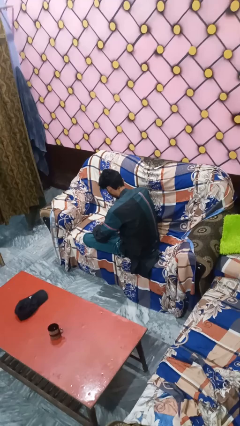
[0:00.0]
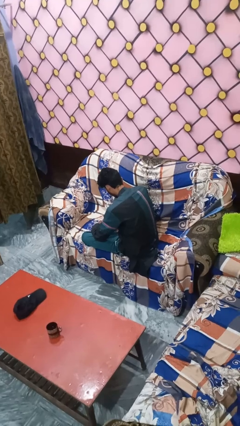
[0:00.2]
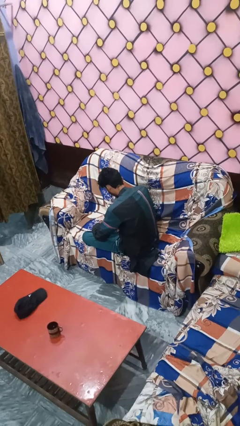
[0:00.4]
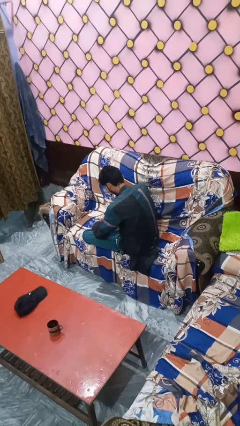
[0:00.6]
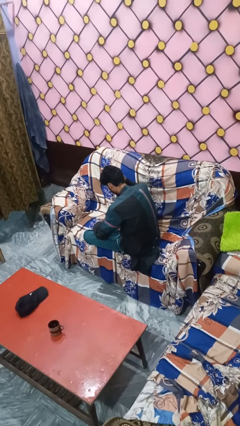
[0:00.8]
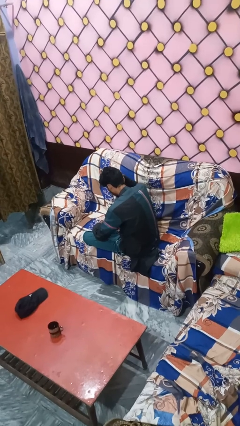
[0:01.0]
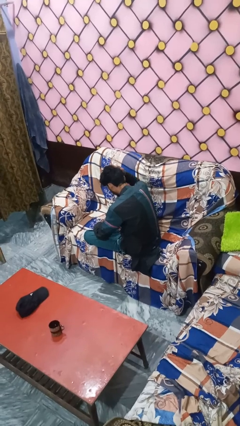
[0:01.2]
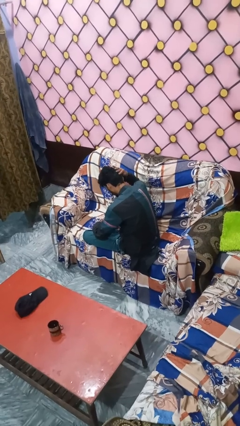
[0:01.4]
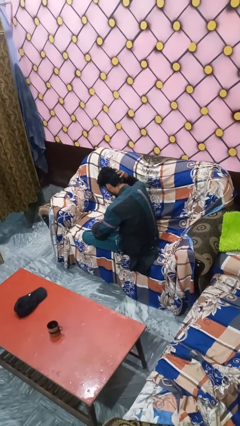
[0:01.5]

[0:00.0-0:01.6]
person pats head

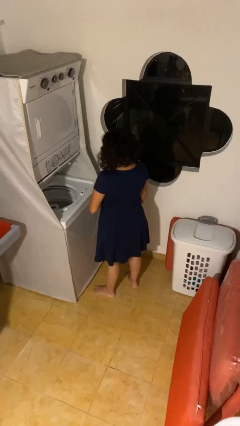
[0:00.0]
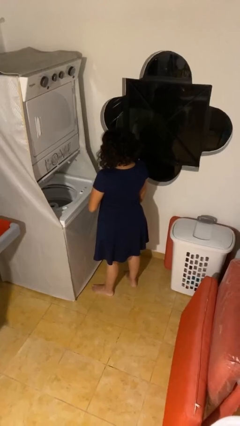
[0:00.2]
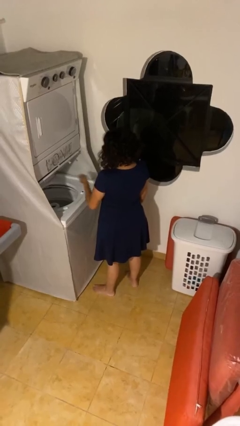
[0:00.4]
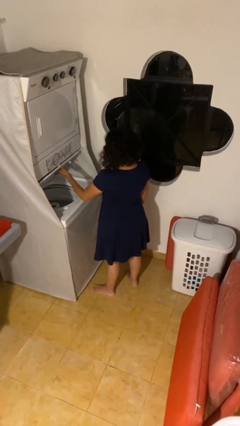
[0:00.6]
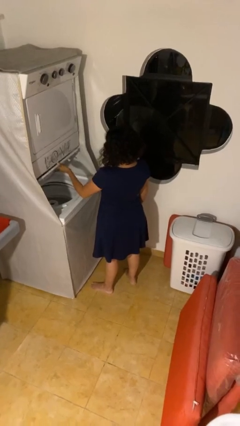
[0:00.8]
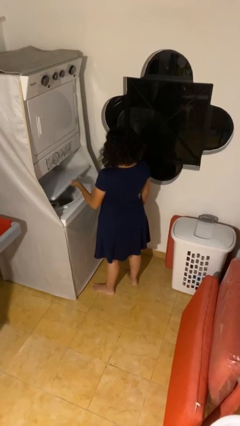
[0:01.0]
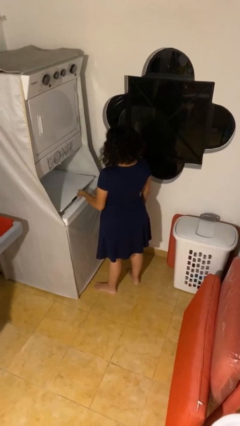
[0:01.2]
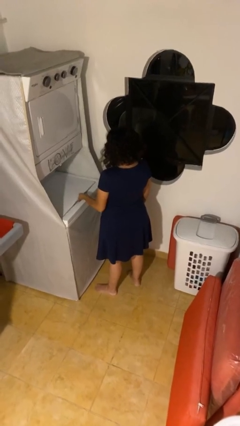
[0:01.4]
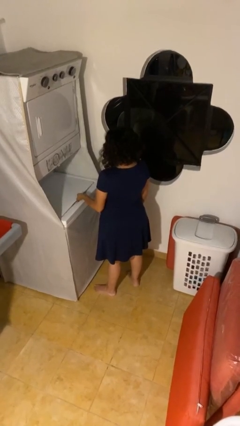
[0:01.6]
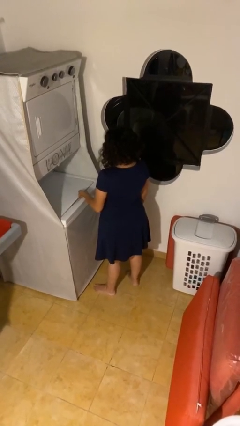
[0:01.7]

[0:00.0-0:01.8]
person closes clothes washer

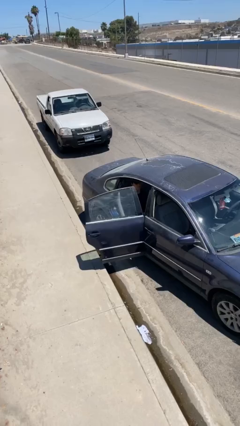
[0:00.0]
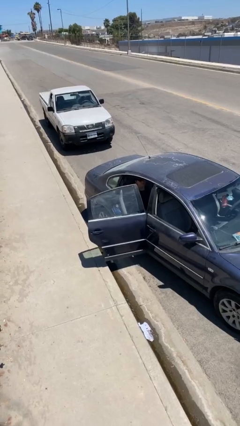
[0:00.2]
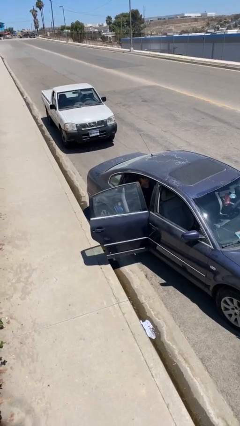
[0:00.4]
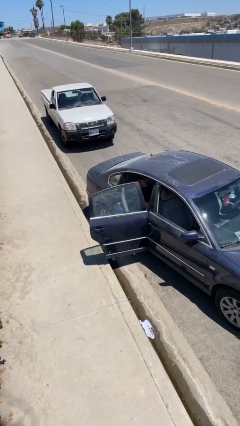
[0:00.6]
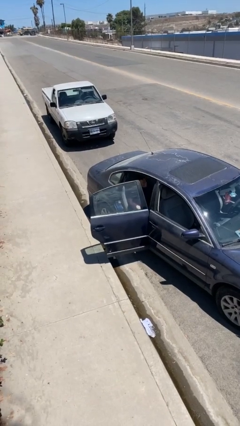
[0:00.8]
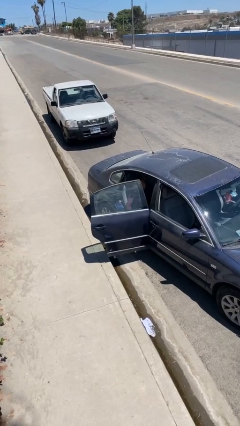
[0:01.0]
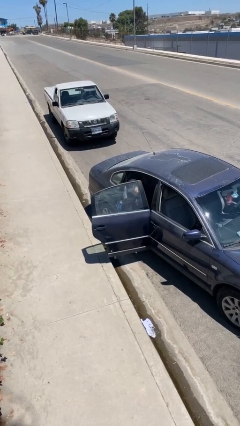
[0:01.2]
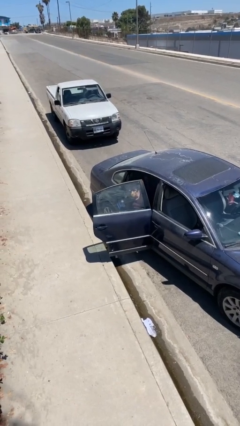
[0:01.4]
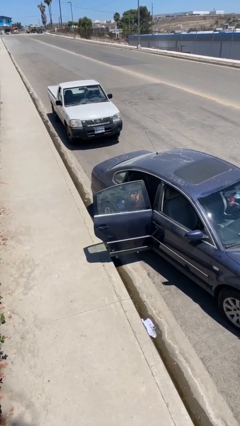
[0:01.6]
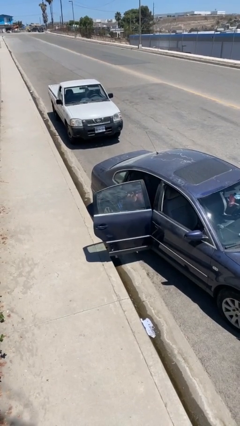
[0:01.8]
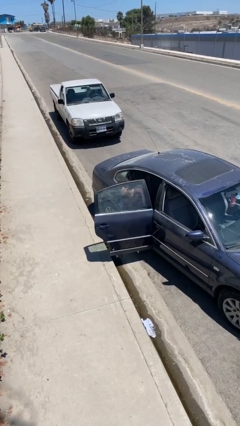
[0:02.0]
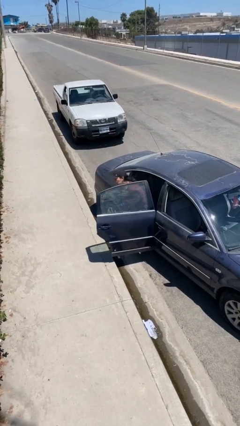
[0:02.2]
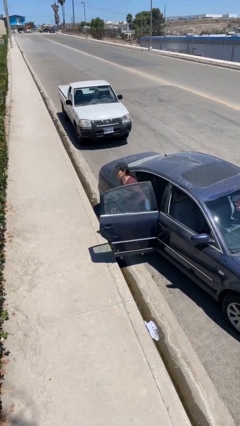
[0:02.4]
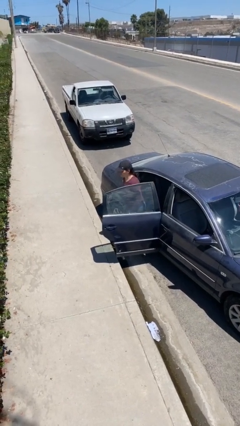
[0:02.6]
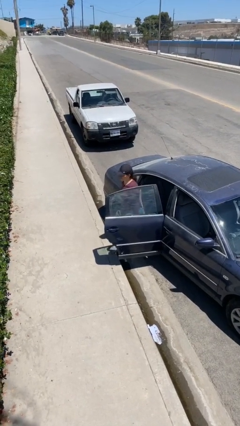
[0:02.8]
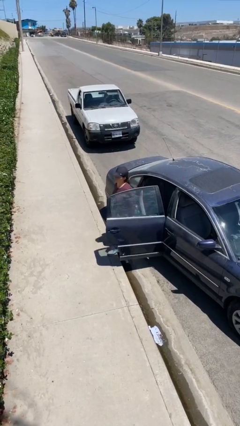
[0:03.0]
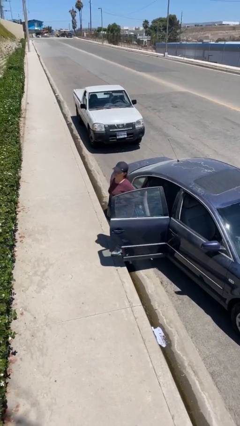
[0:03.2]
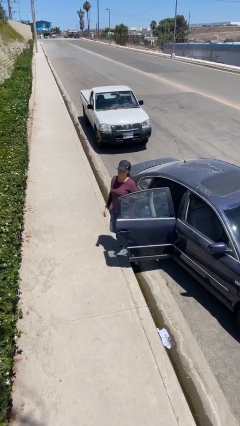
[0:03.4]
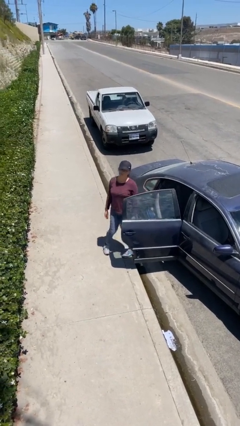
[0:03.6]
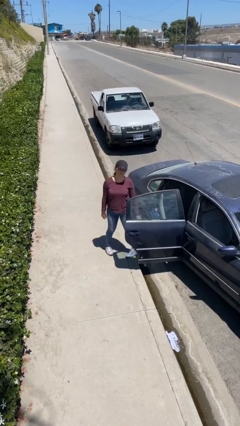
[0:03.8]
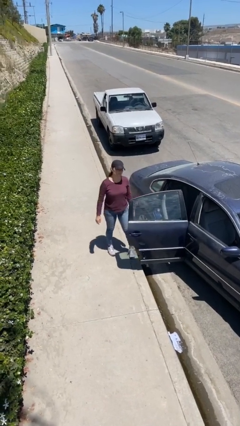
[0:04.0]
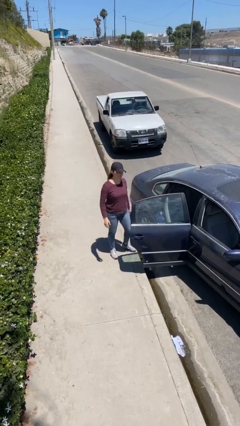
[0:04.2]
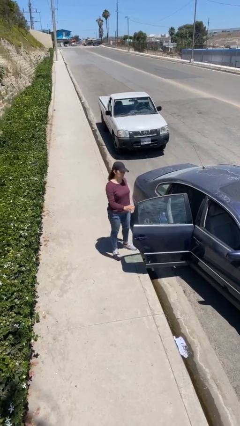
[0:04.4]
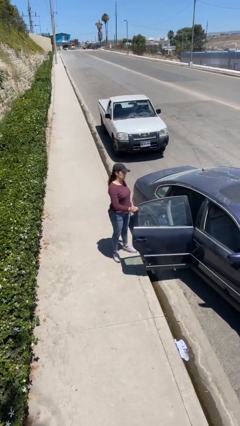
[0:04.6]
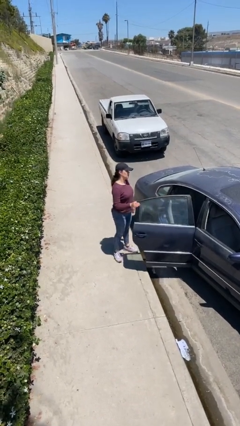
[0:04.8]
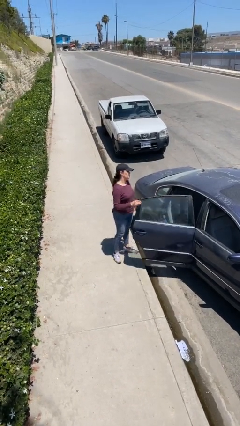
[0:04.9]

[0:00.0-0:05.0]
person exits car

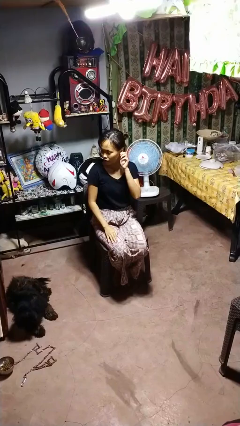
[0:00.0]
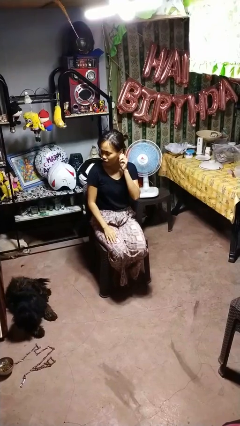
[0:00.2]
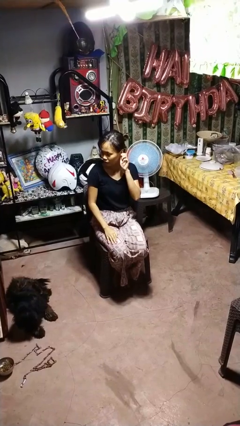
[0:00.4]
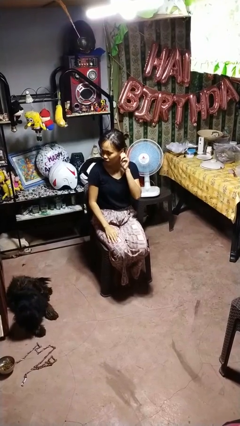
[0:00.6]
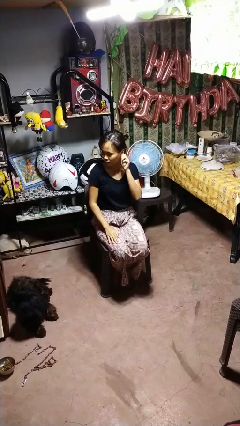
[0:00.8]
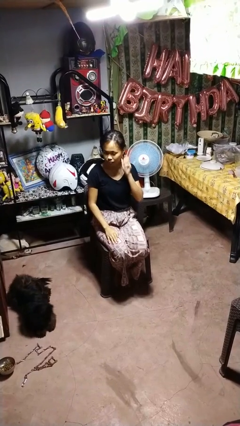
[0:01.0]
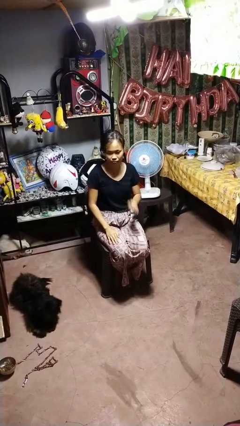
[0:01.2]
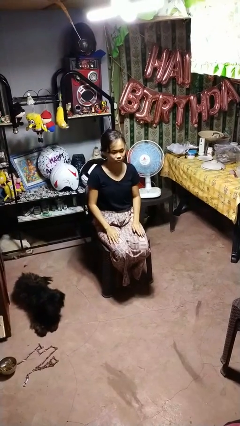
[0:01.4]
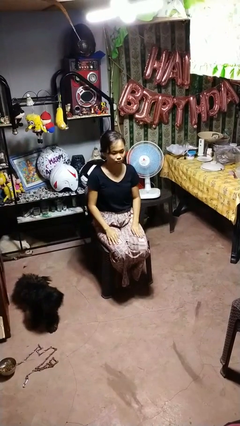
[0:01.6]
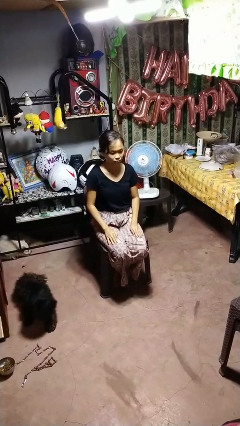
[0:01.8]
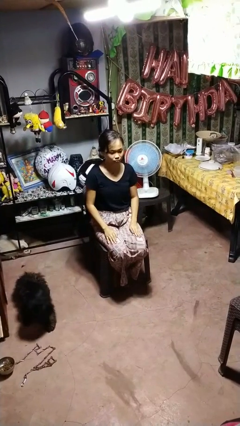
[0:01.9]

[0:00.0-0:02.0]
person touches earlobe

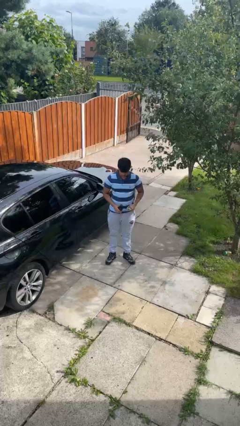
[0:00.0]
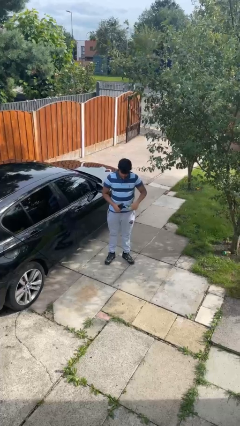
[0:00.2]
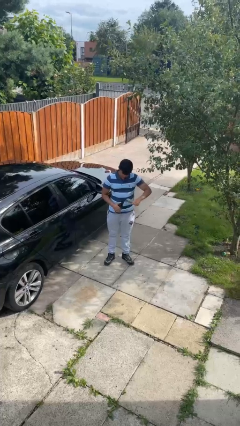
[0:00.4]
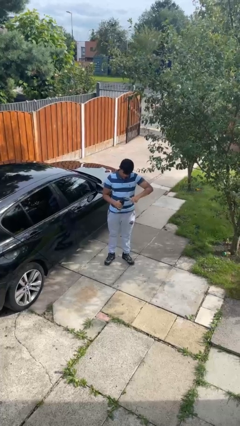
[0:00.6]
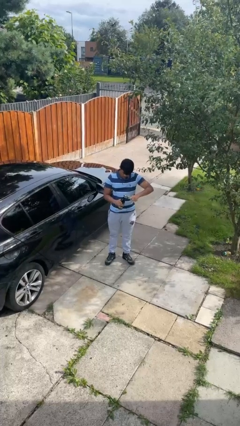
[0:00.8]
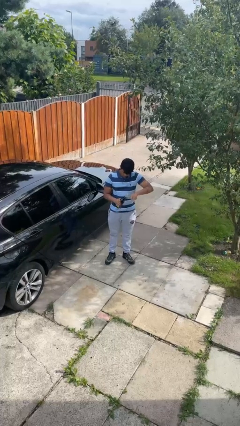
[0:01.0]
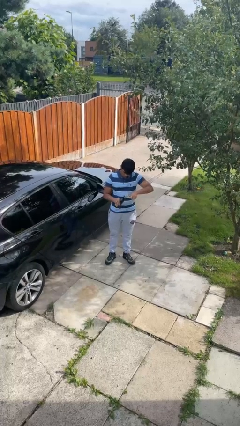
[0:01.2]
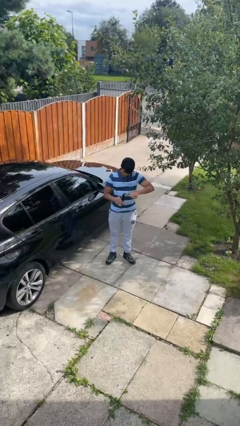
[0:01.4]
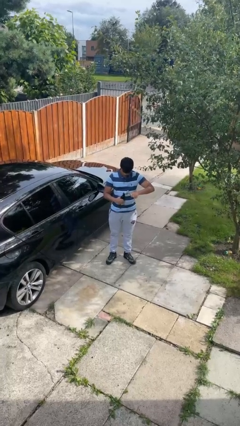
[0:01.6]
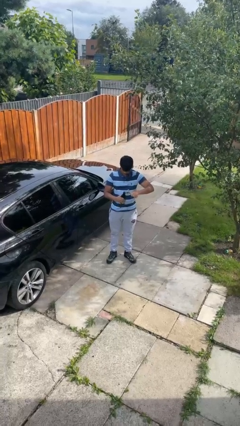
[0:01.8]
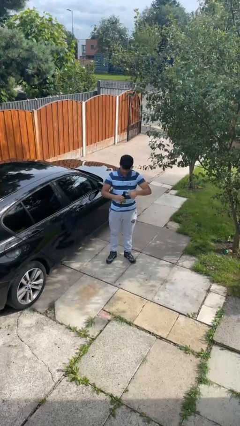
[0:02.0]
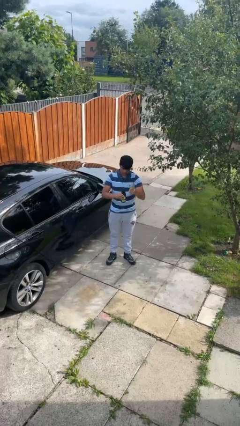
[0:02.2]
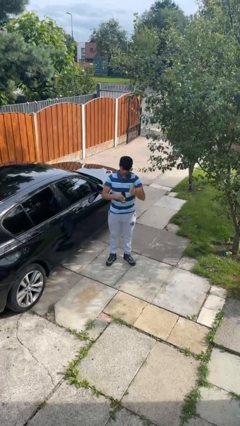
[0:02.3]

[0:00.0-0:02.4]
person opens can with can opener

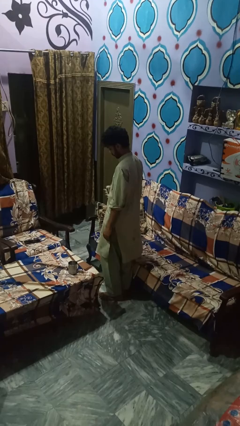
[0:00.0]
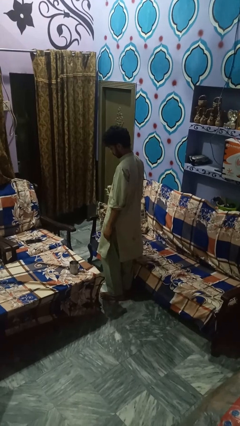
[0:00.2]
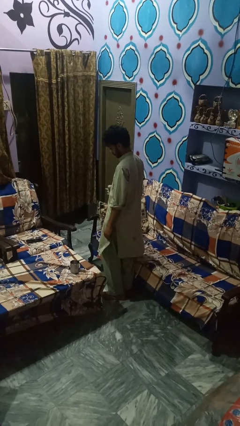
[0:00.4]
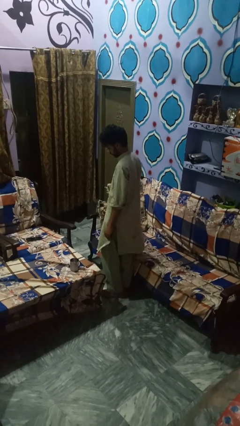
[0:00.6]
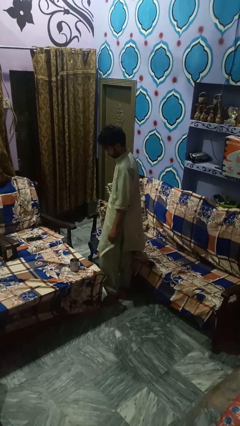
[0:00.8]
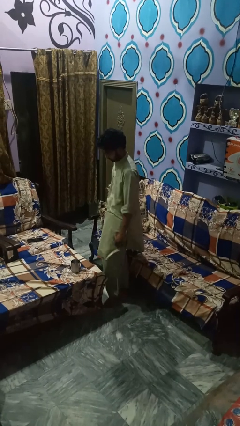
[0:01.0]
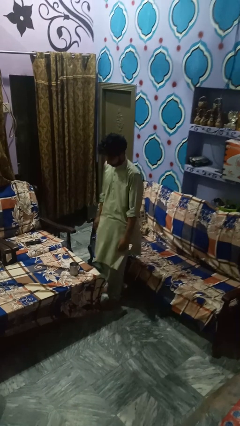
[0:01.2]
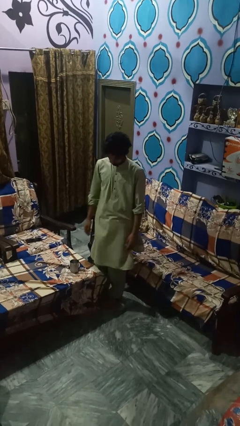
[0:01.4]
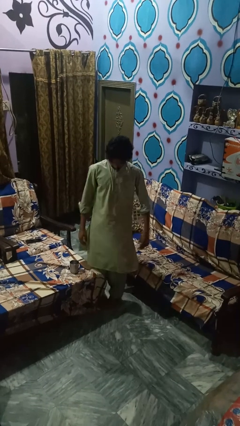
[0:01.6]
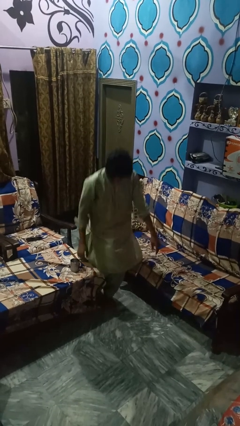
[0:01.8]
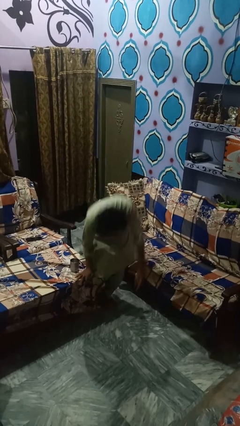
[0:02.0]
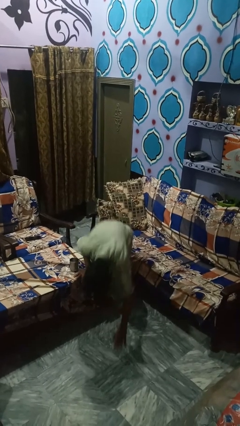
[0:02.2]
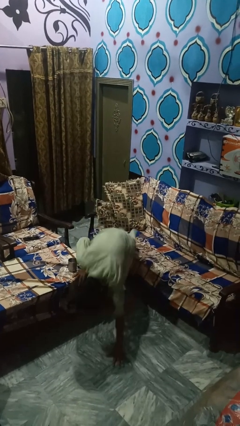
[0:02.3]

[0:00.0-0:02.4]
person trips on object on floor

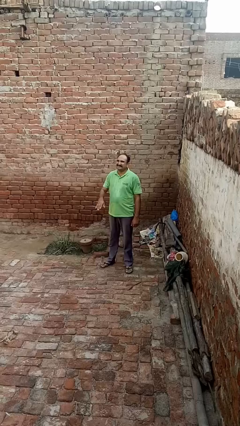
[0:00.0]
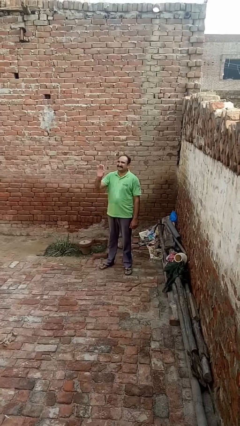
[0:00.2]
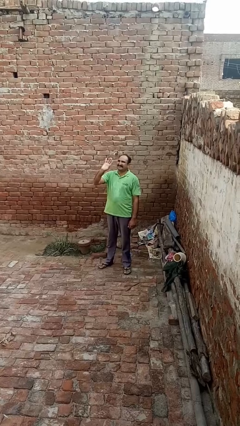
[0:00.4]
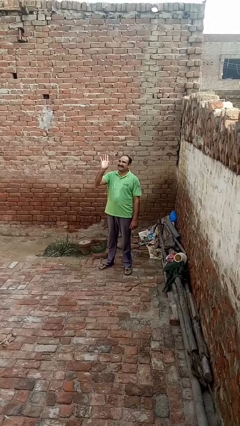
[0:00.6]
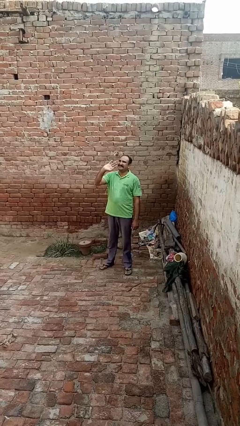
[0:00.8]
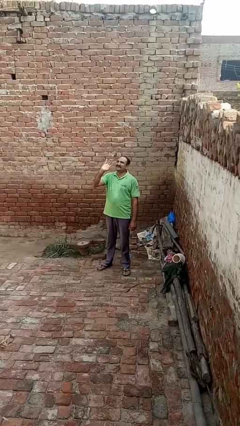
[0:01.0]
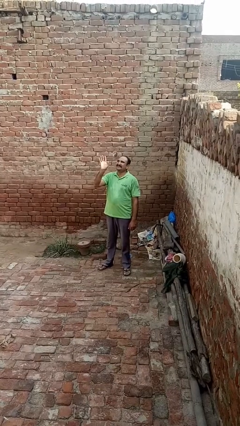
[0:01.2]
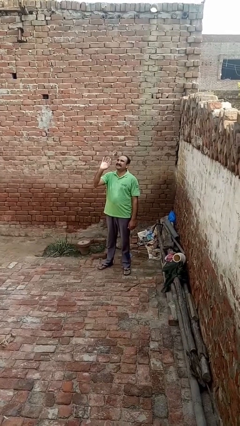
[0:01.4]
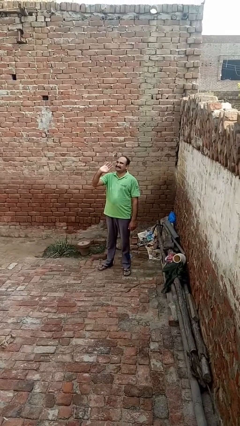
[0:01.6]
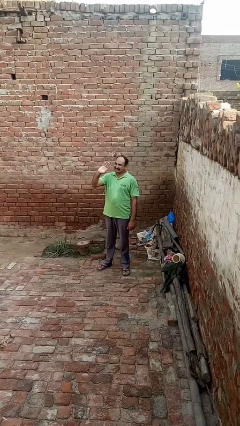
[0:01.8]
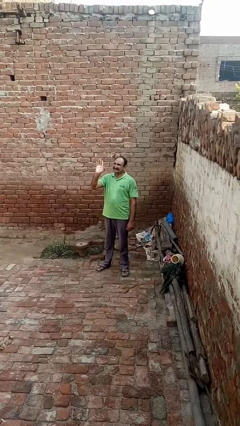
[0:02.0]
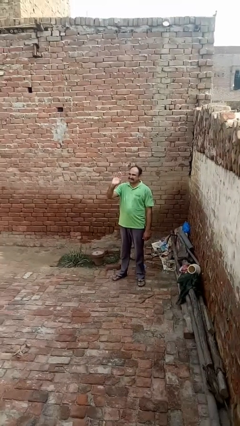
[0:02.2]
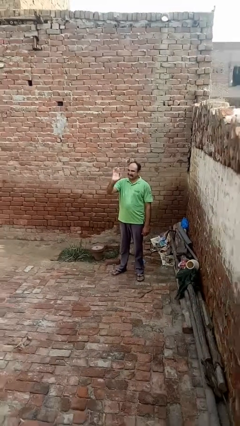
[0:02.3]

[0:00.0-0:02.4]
person waves at person
